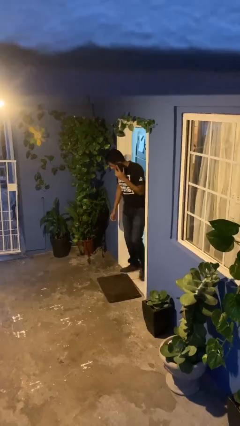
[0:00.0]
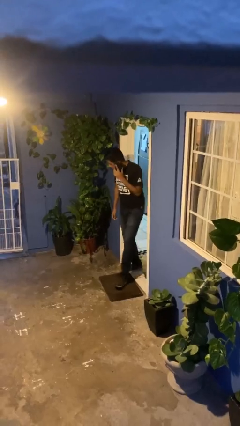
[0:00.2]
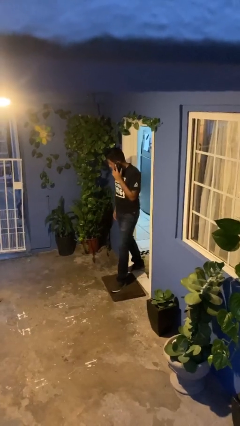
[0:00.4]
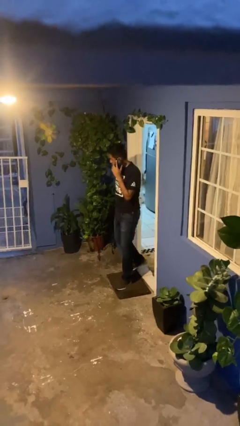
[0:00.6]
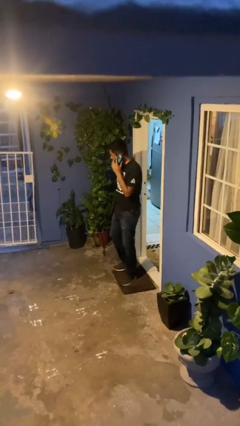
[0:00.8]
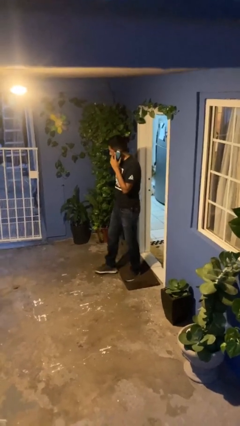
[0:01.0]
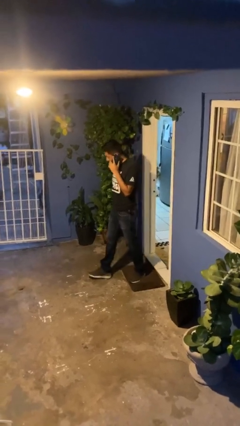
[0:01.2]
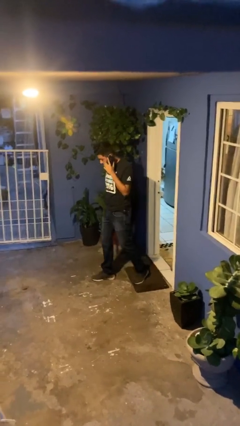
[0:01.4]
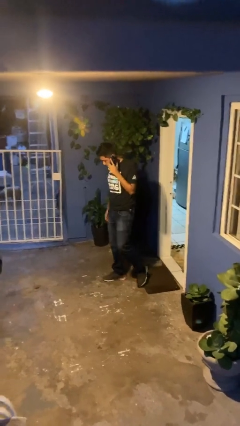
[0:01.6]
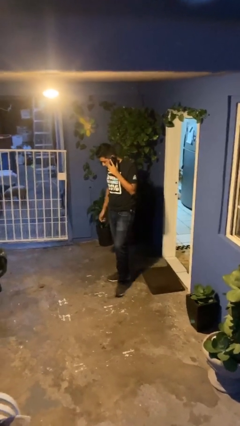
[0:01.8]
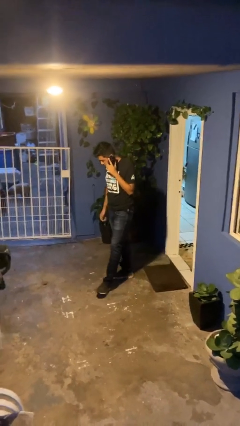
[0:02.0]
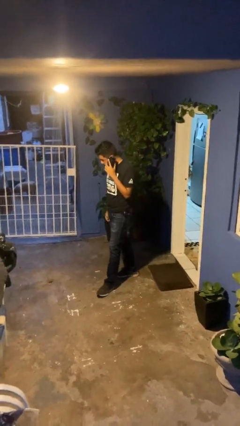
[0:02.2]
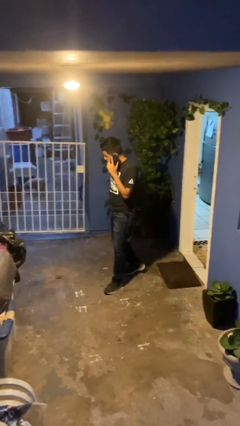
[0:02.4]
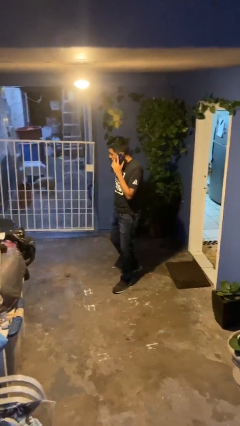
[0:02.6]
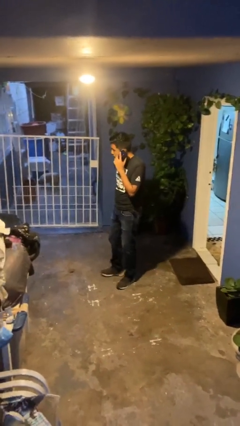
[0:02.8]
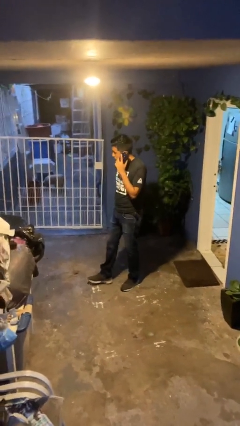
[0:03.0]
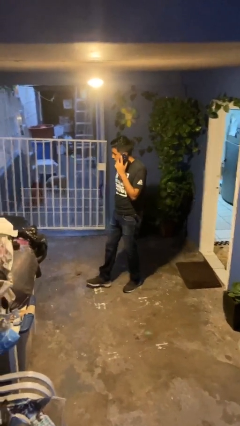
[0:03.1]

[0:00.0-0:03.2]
person enters scene through structure

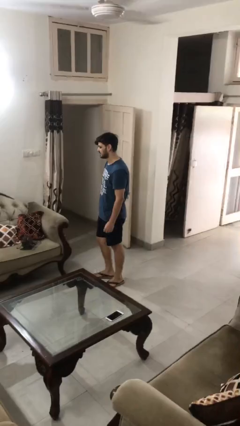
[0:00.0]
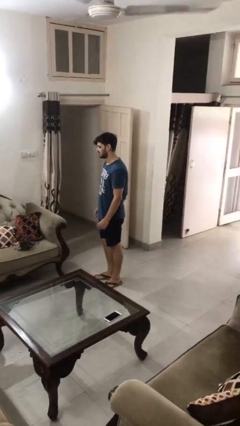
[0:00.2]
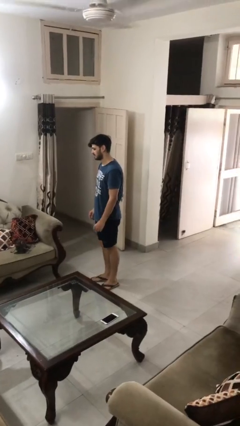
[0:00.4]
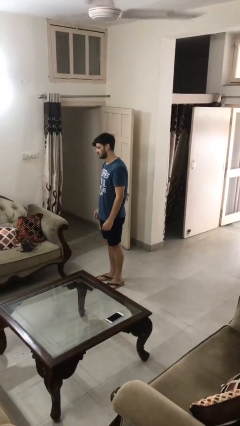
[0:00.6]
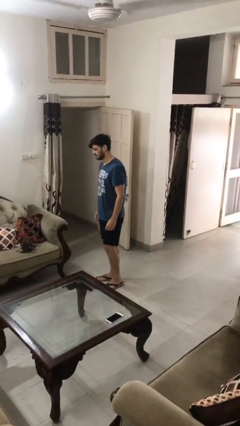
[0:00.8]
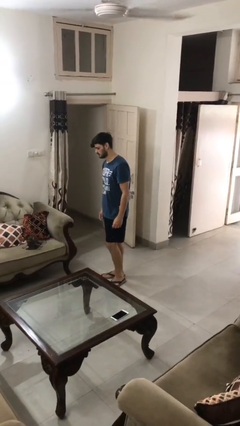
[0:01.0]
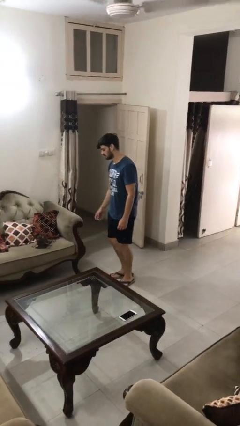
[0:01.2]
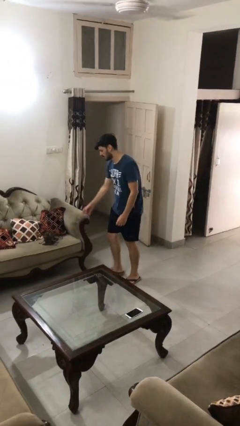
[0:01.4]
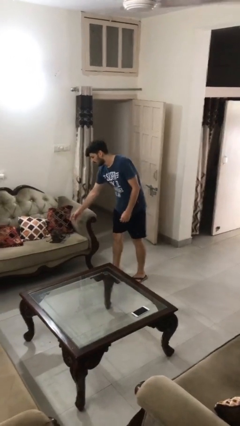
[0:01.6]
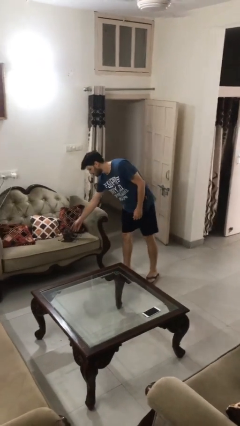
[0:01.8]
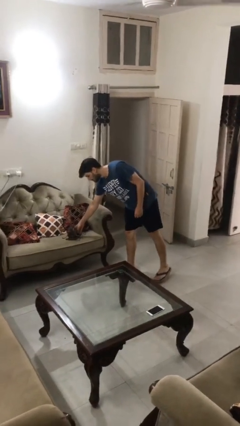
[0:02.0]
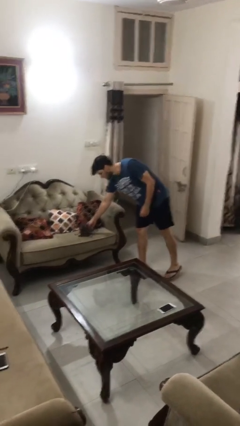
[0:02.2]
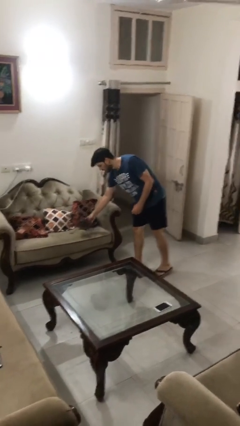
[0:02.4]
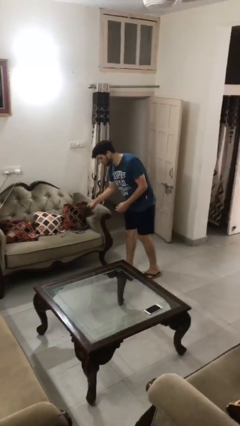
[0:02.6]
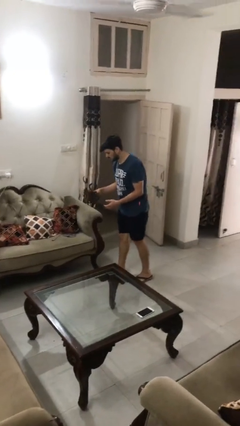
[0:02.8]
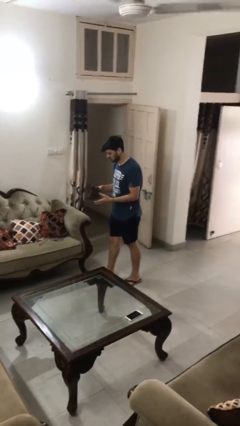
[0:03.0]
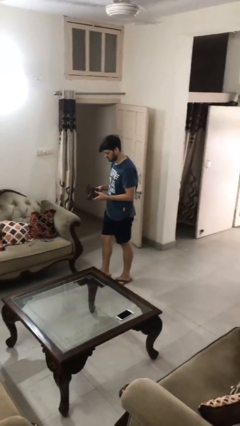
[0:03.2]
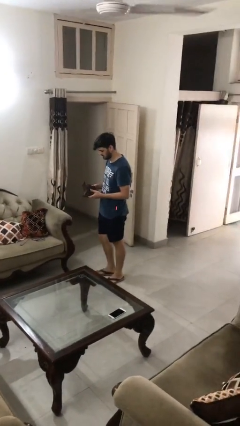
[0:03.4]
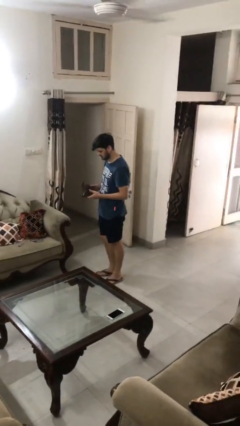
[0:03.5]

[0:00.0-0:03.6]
person picks up object from couch

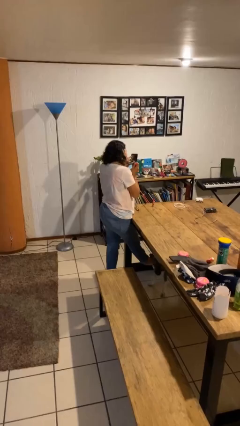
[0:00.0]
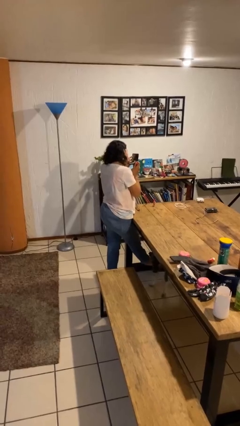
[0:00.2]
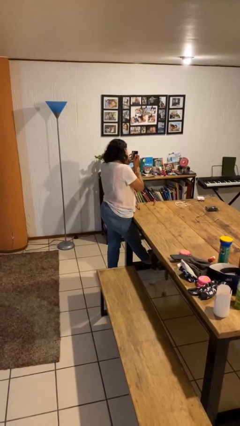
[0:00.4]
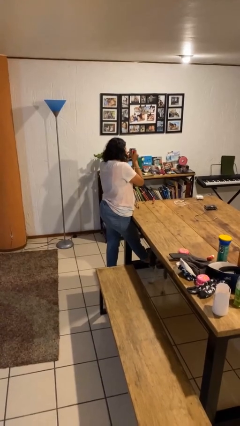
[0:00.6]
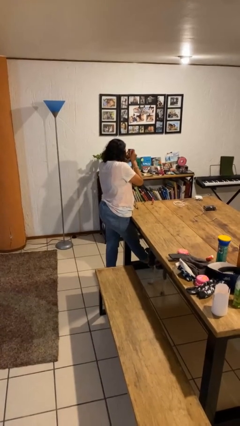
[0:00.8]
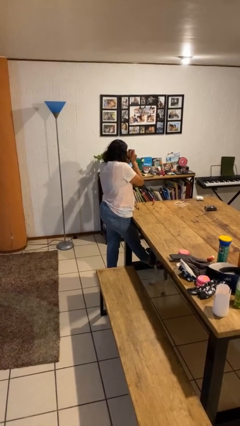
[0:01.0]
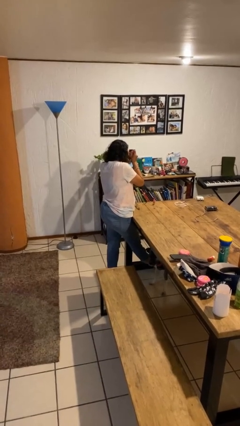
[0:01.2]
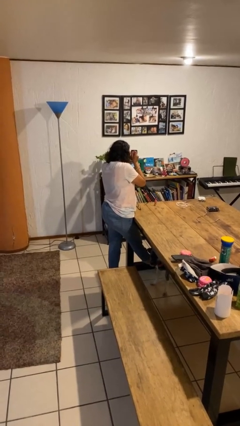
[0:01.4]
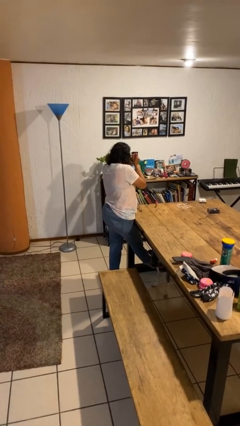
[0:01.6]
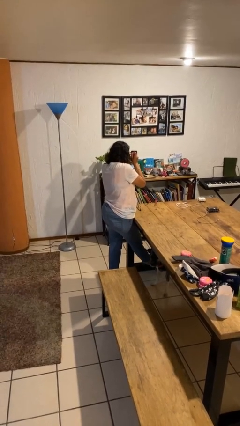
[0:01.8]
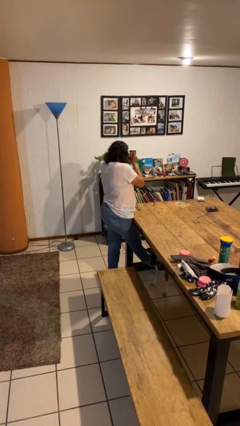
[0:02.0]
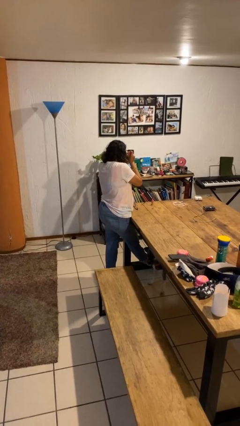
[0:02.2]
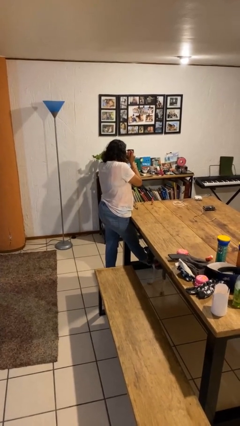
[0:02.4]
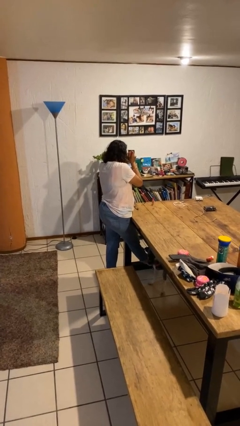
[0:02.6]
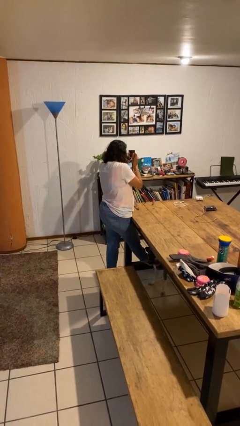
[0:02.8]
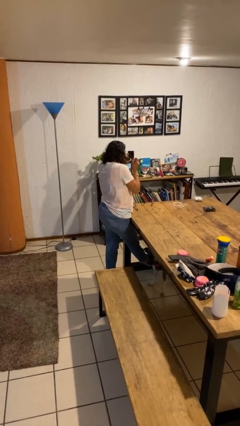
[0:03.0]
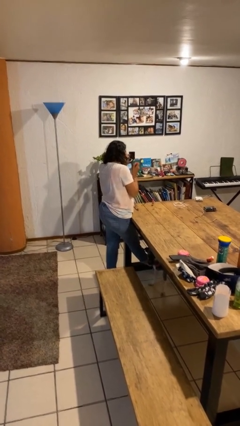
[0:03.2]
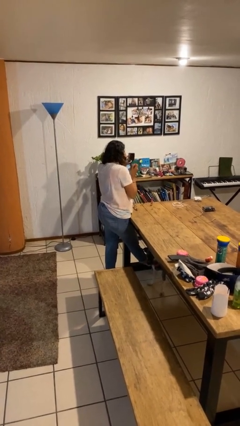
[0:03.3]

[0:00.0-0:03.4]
person applies eye makeup

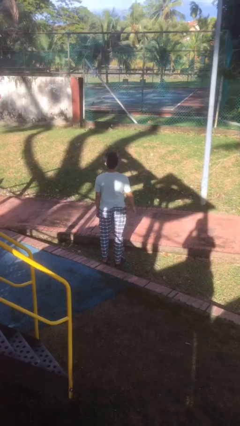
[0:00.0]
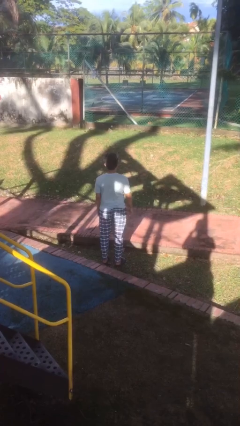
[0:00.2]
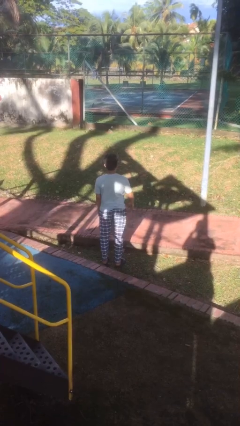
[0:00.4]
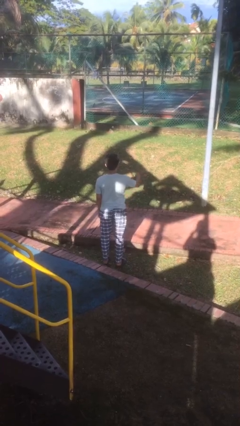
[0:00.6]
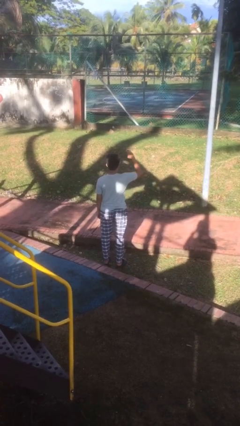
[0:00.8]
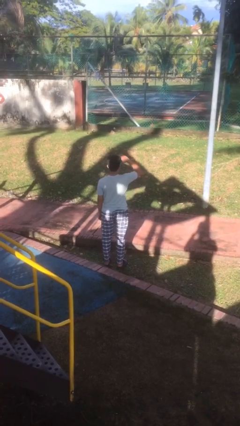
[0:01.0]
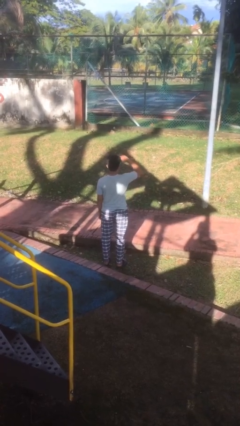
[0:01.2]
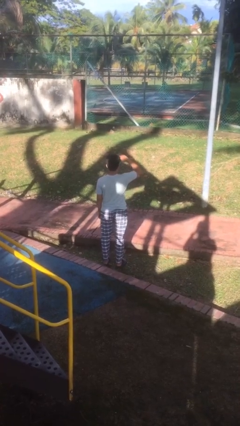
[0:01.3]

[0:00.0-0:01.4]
person salutes

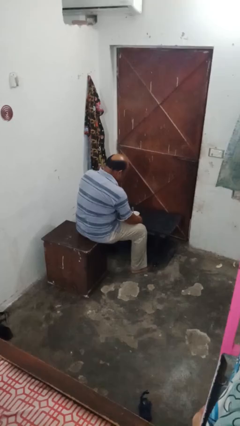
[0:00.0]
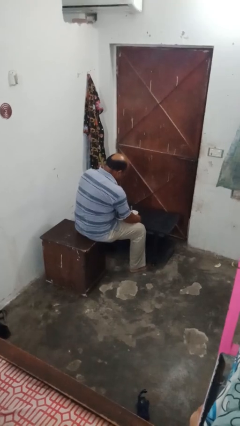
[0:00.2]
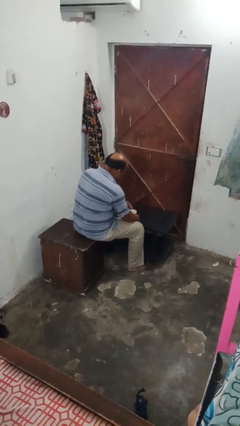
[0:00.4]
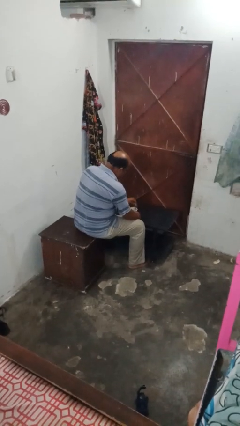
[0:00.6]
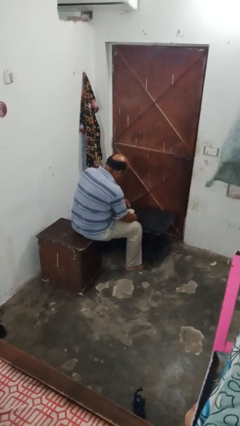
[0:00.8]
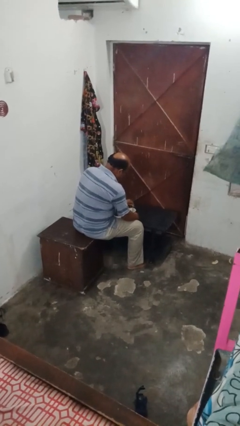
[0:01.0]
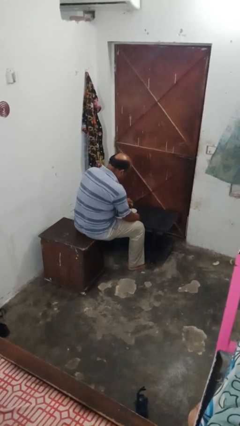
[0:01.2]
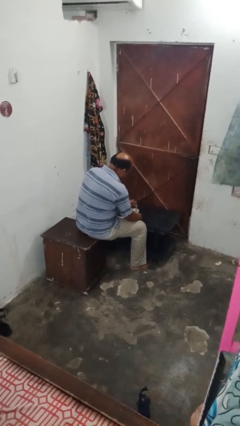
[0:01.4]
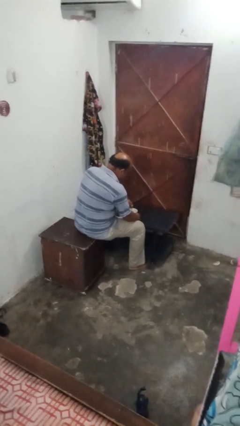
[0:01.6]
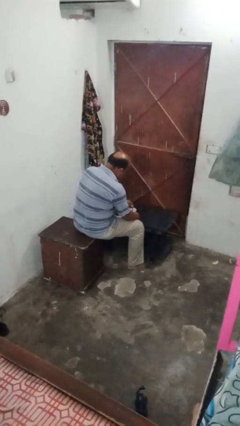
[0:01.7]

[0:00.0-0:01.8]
person stirs mug

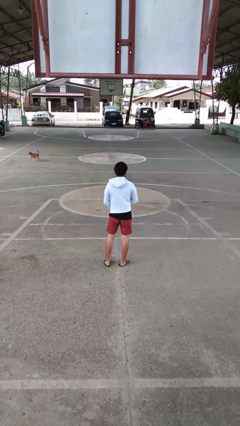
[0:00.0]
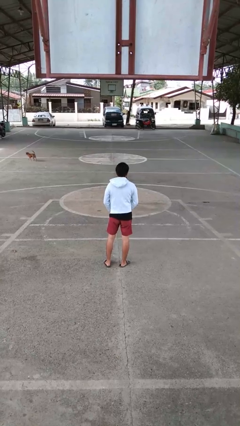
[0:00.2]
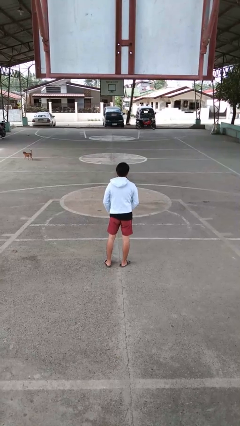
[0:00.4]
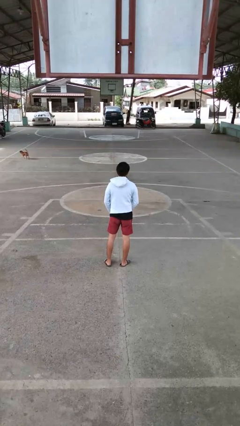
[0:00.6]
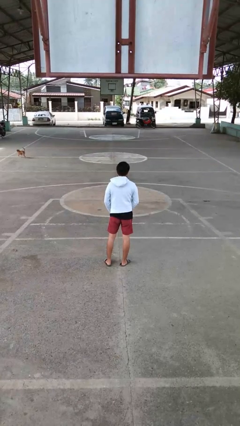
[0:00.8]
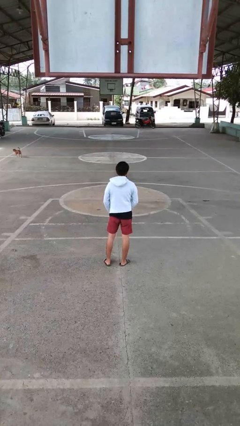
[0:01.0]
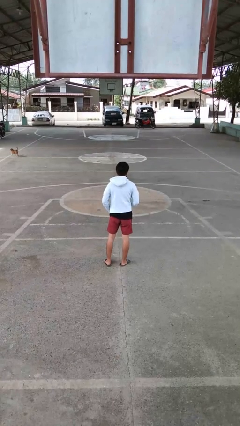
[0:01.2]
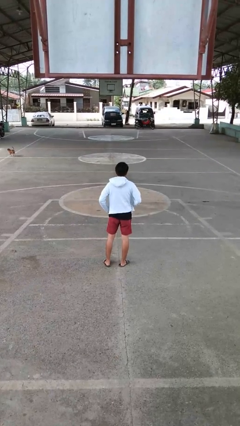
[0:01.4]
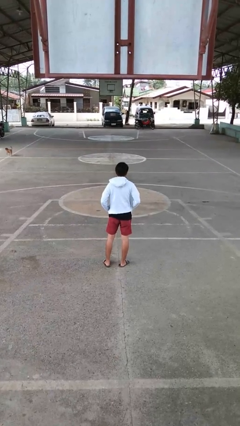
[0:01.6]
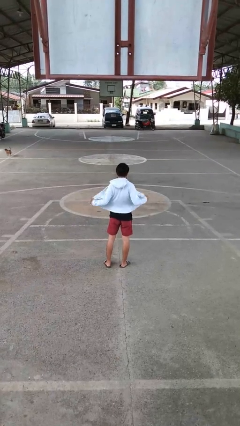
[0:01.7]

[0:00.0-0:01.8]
person unzips jacket

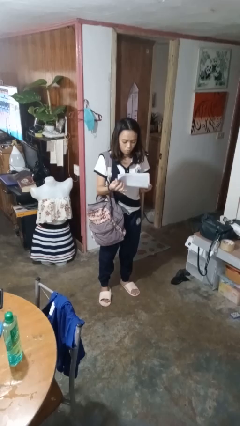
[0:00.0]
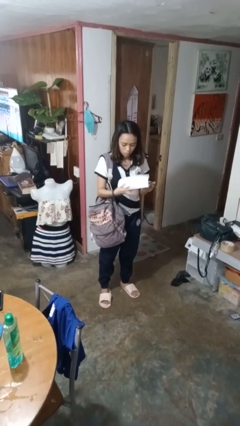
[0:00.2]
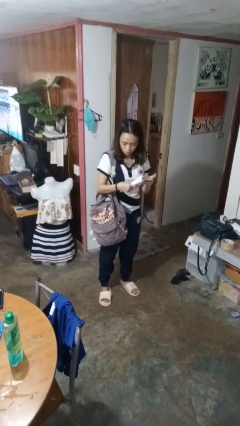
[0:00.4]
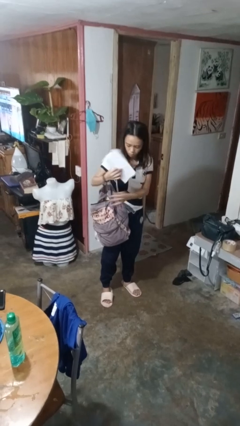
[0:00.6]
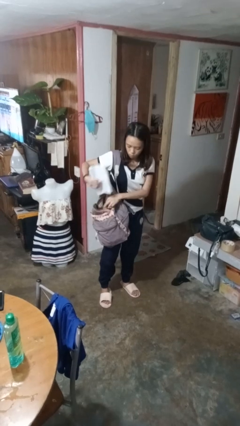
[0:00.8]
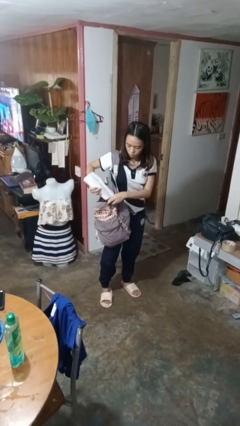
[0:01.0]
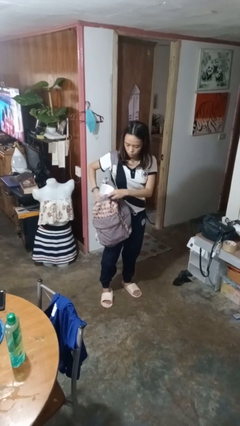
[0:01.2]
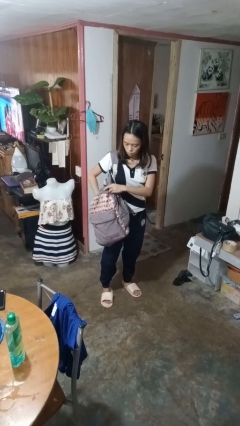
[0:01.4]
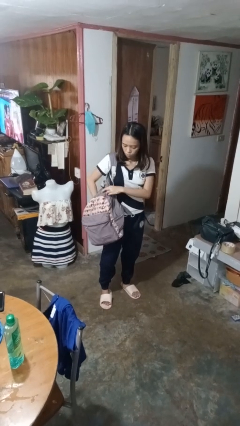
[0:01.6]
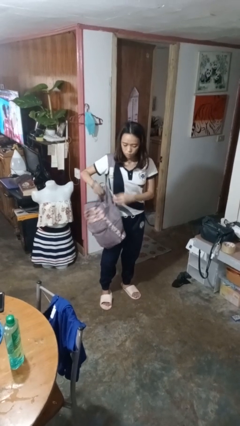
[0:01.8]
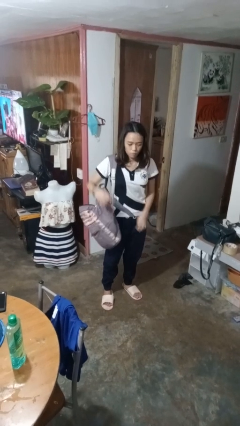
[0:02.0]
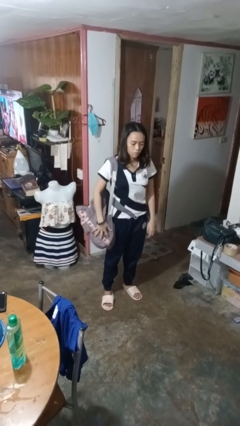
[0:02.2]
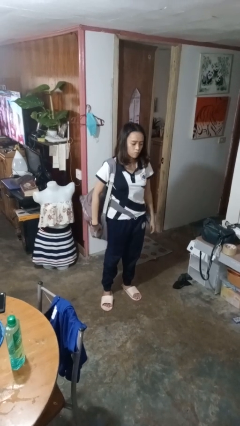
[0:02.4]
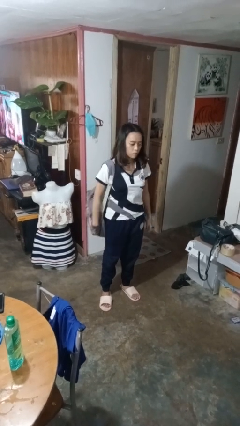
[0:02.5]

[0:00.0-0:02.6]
person puts object into backpack
